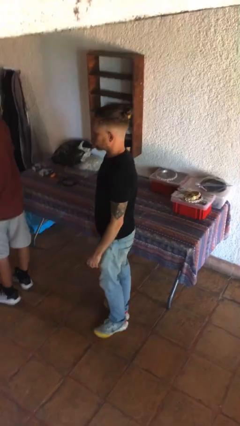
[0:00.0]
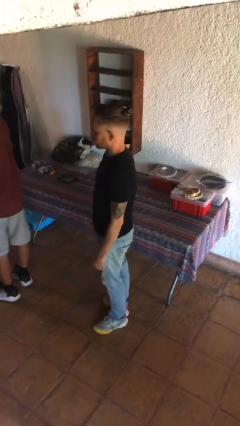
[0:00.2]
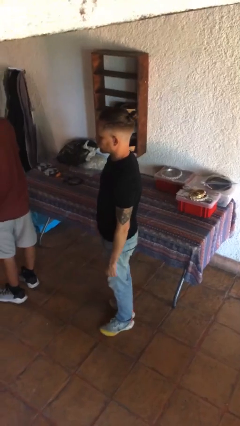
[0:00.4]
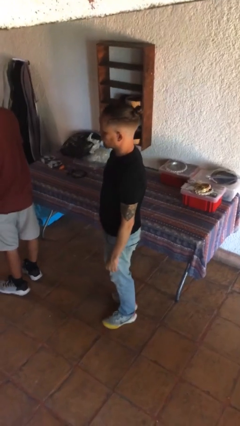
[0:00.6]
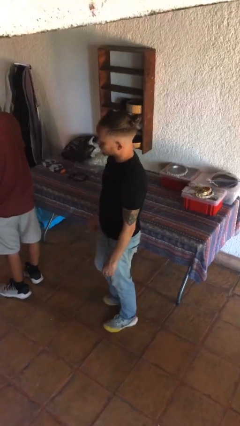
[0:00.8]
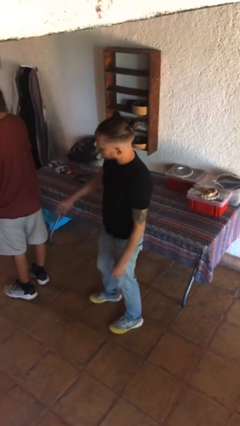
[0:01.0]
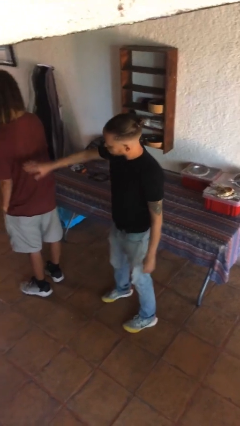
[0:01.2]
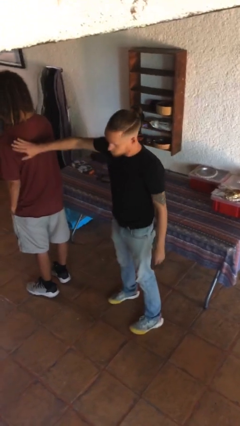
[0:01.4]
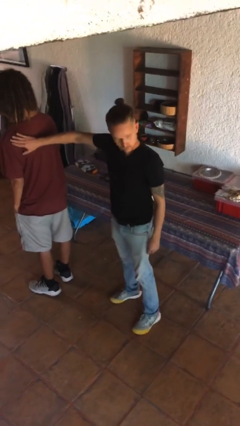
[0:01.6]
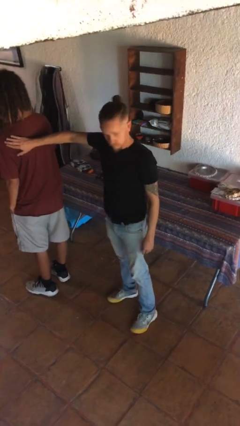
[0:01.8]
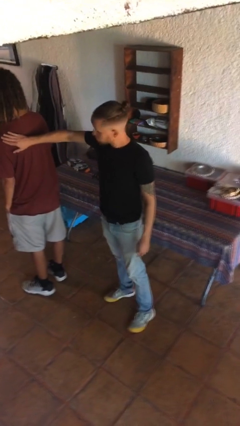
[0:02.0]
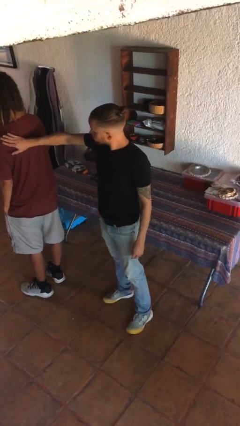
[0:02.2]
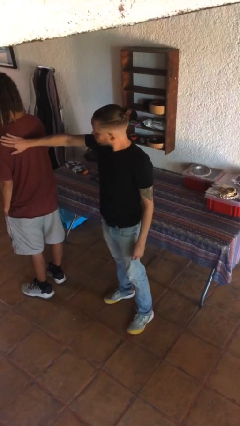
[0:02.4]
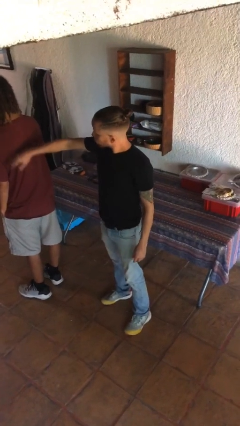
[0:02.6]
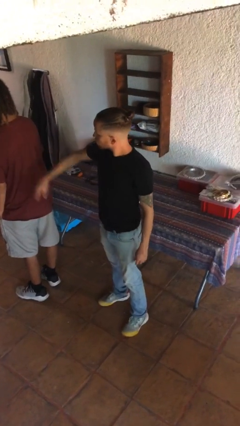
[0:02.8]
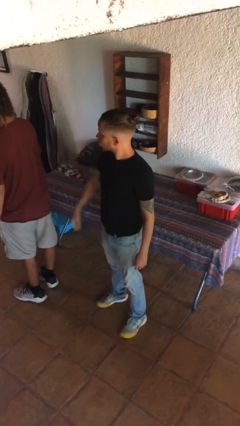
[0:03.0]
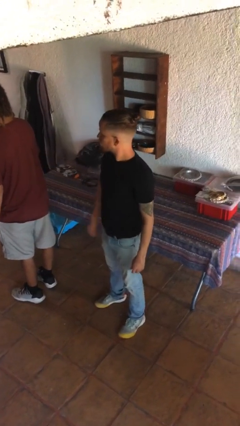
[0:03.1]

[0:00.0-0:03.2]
person touches back of person

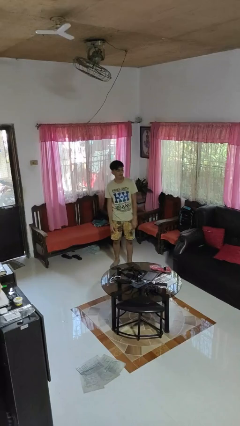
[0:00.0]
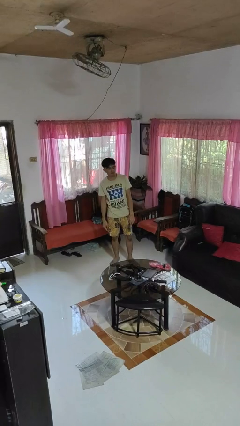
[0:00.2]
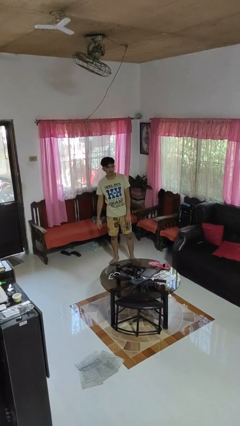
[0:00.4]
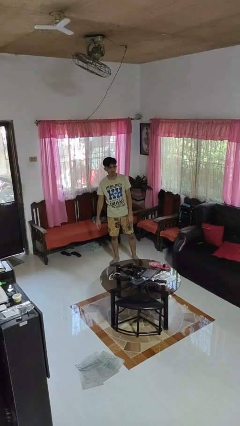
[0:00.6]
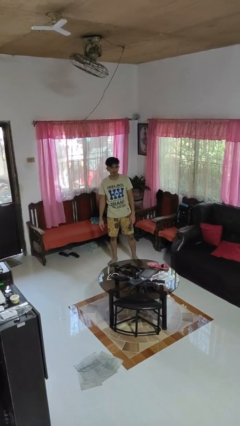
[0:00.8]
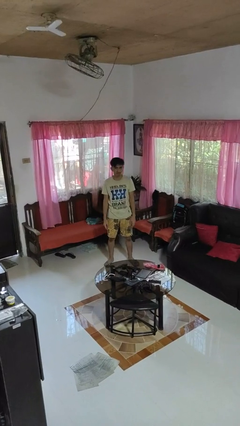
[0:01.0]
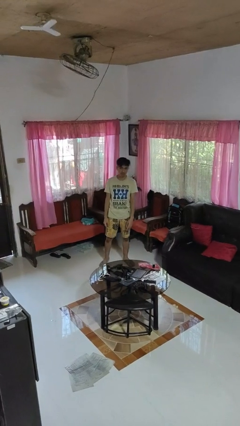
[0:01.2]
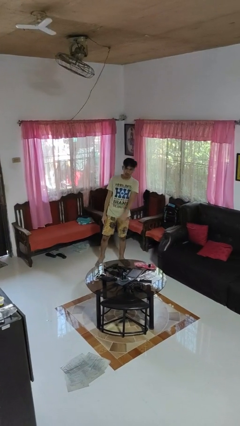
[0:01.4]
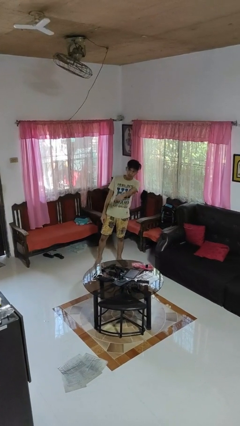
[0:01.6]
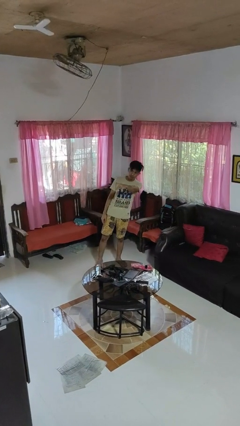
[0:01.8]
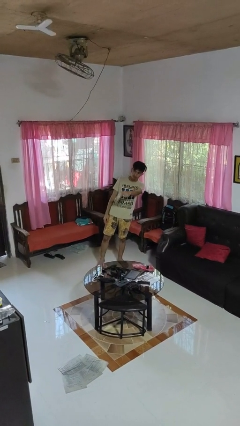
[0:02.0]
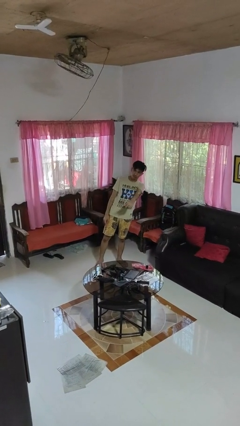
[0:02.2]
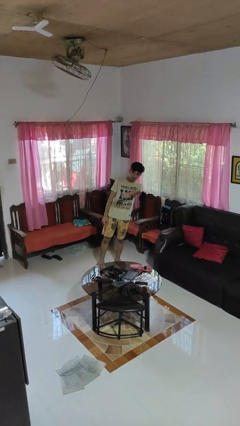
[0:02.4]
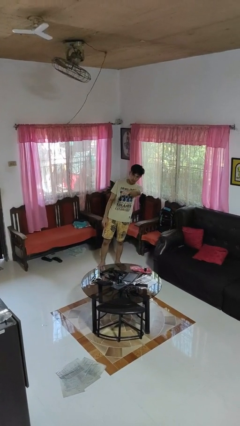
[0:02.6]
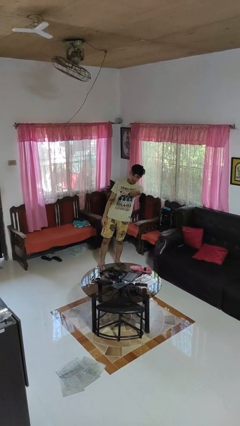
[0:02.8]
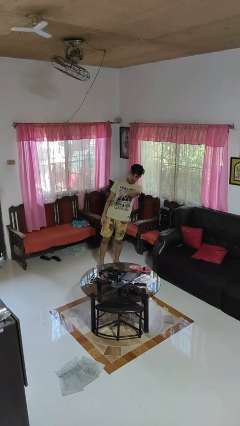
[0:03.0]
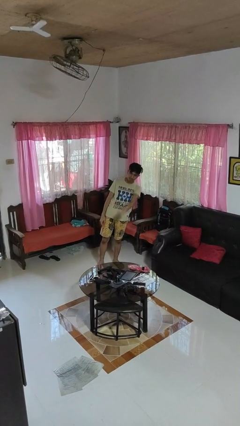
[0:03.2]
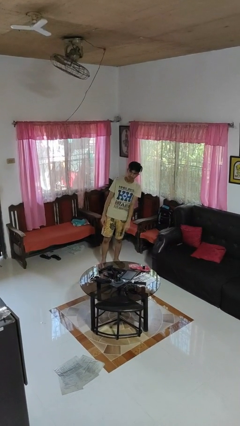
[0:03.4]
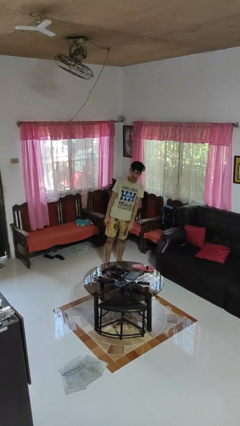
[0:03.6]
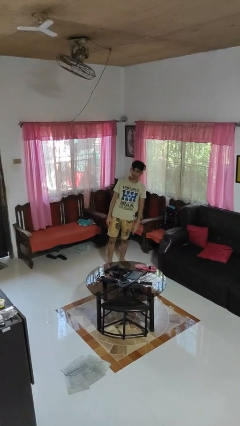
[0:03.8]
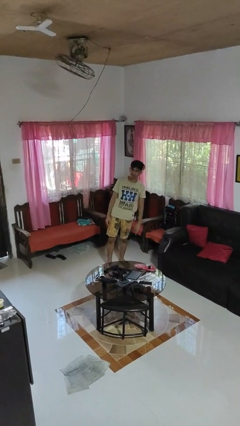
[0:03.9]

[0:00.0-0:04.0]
person points at person

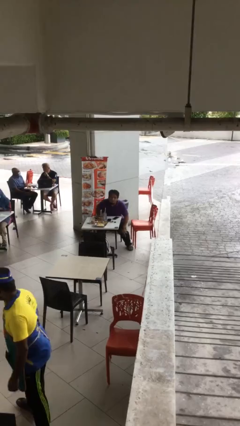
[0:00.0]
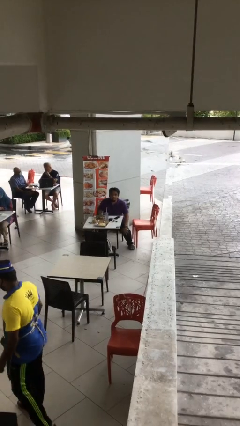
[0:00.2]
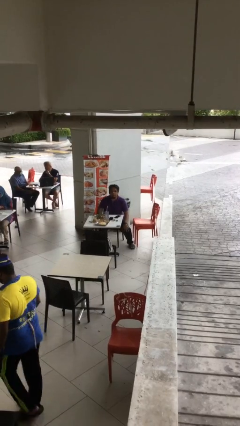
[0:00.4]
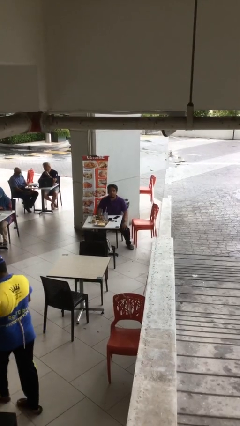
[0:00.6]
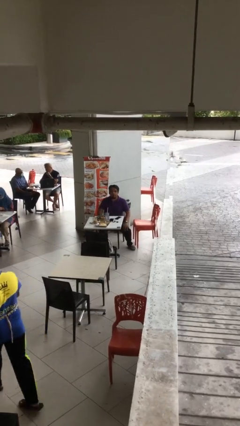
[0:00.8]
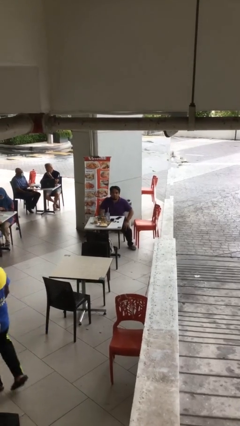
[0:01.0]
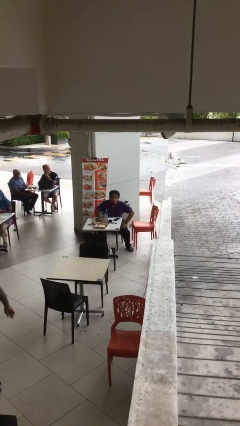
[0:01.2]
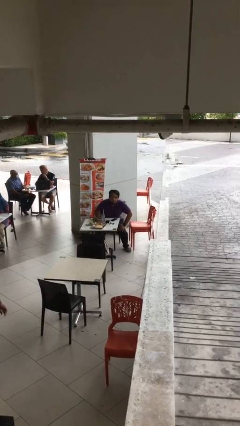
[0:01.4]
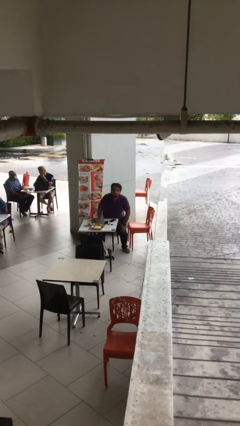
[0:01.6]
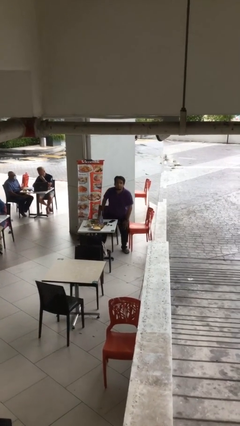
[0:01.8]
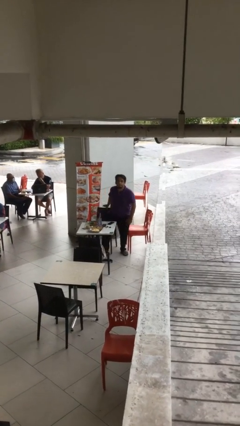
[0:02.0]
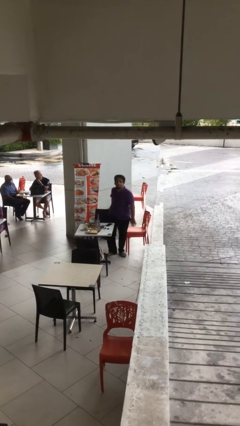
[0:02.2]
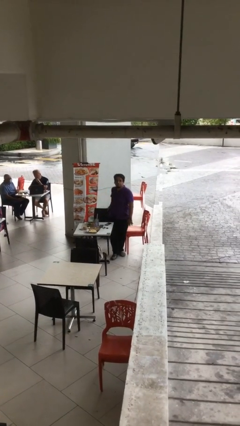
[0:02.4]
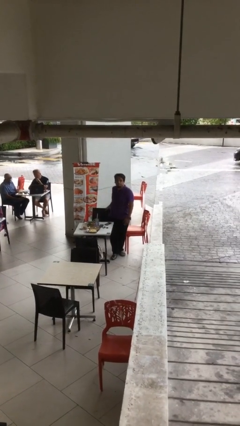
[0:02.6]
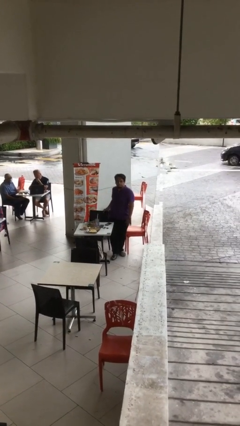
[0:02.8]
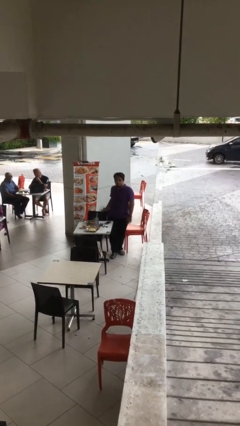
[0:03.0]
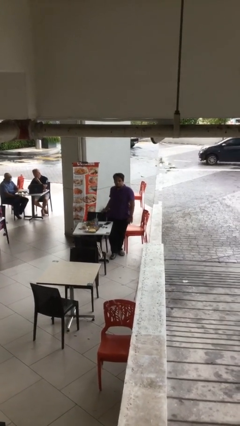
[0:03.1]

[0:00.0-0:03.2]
person stands up

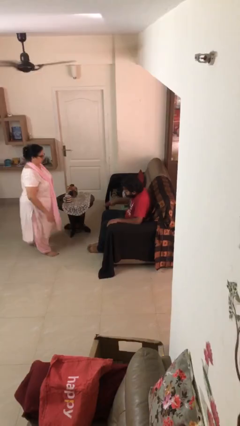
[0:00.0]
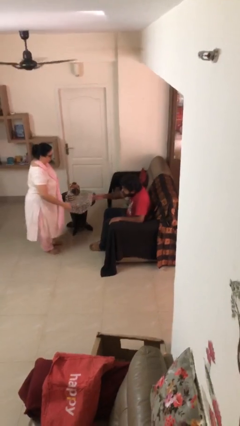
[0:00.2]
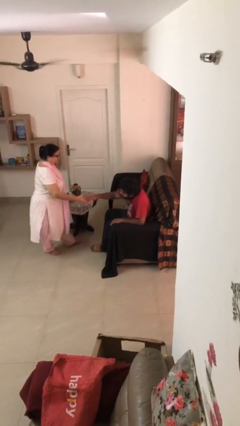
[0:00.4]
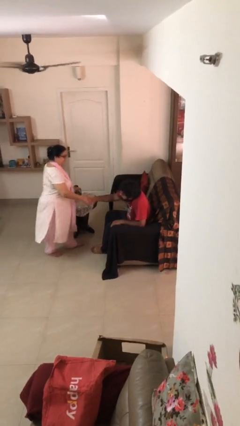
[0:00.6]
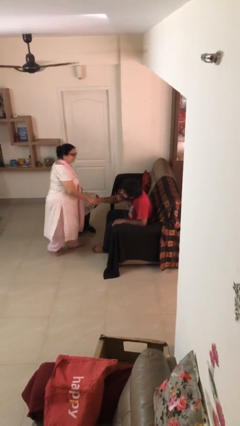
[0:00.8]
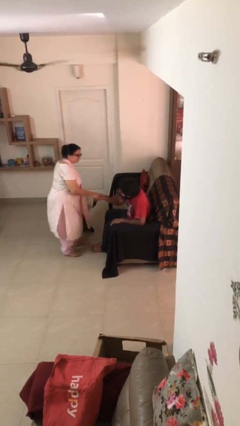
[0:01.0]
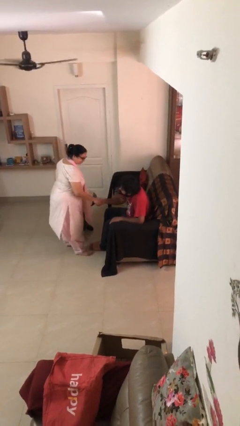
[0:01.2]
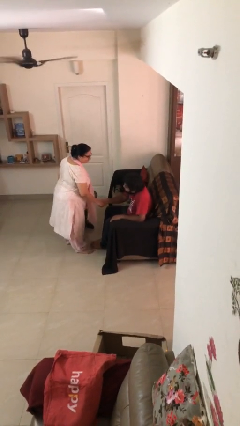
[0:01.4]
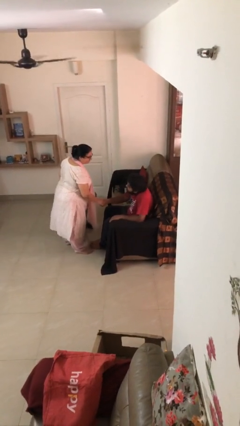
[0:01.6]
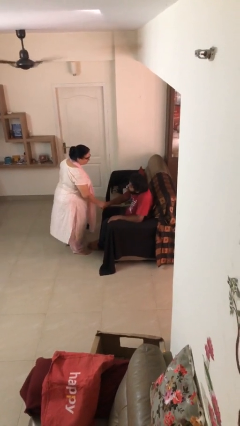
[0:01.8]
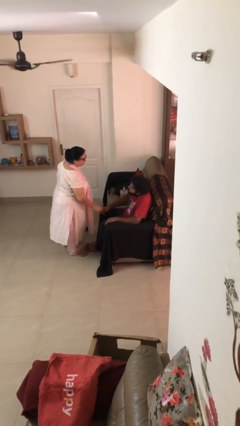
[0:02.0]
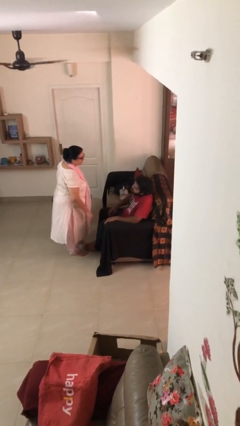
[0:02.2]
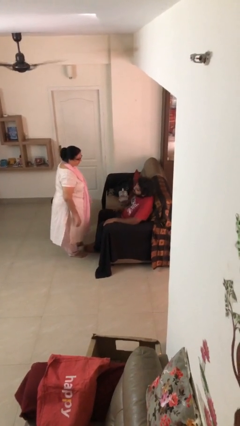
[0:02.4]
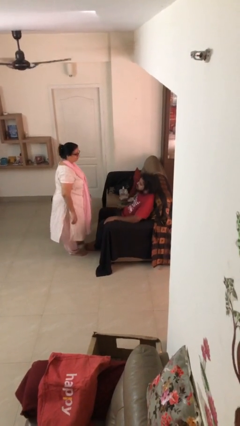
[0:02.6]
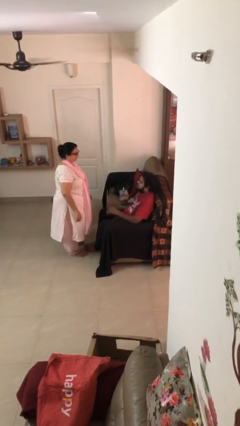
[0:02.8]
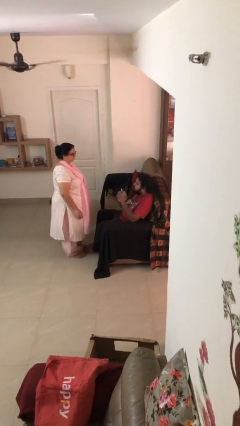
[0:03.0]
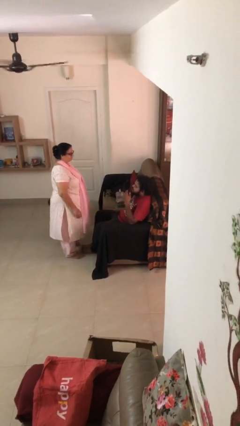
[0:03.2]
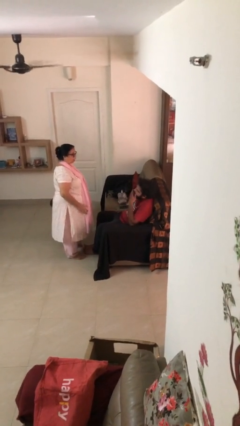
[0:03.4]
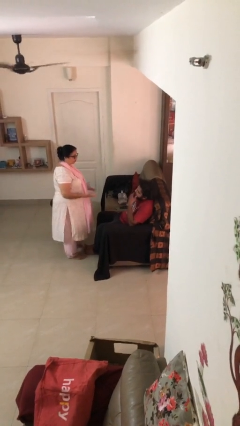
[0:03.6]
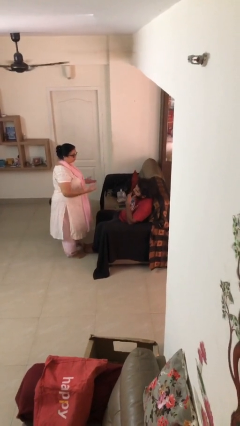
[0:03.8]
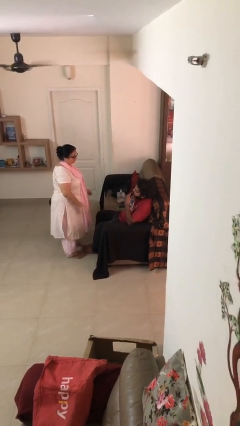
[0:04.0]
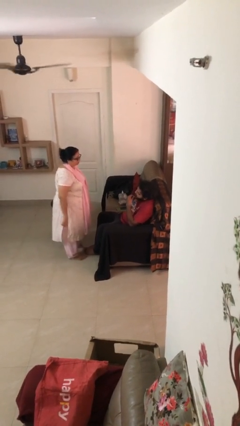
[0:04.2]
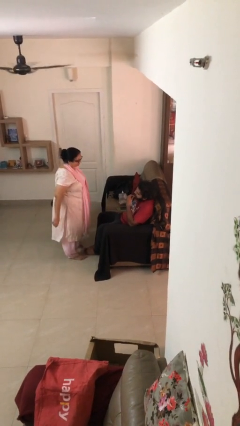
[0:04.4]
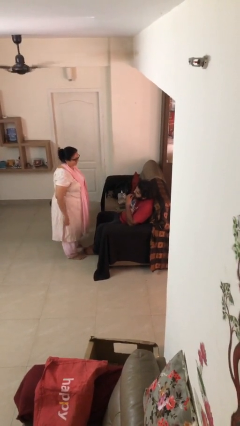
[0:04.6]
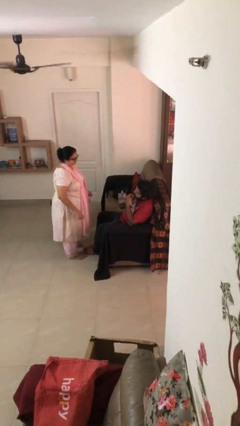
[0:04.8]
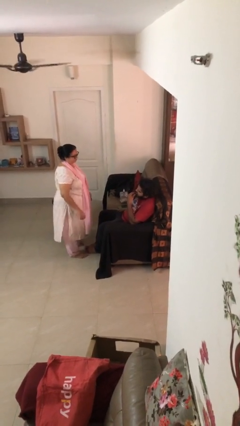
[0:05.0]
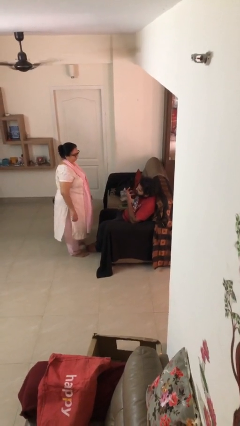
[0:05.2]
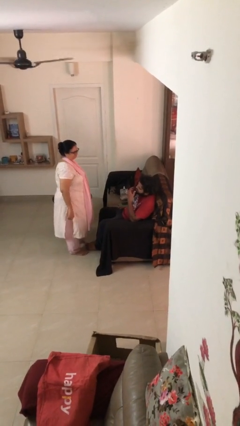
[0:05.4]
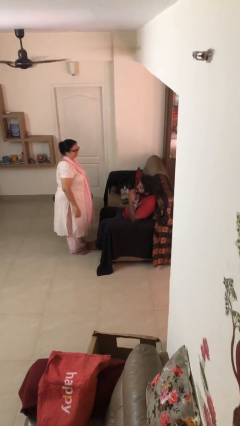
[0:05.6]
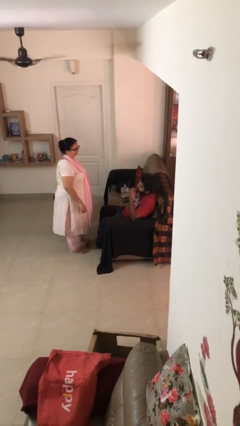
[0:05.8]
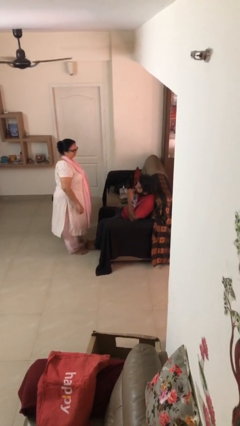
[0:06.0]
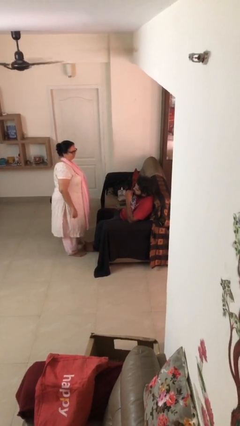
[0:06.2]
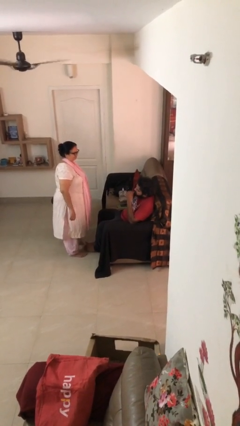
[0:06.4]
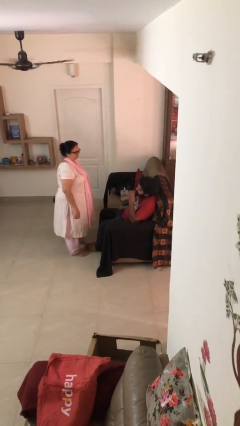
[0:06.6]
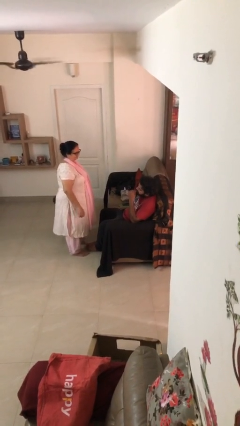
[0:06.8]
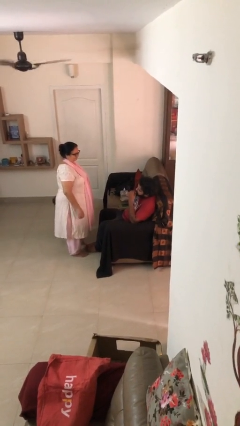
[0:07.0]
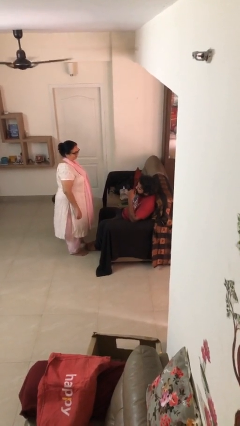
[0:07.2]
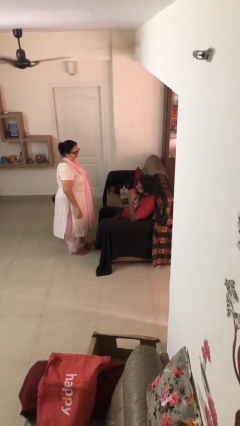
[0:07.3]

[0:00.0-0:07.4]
person shakes hand
